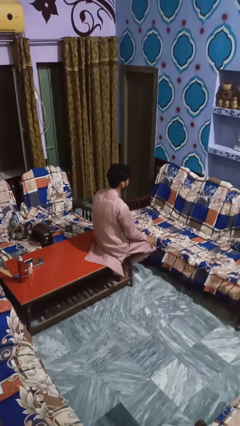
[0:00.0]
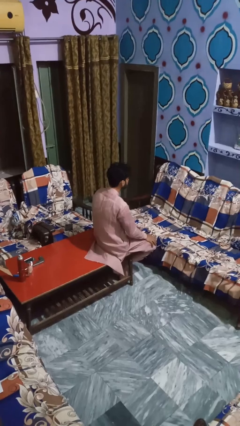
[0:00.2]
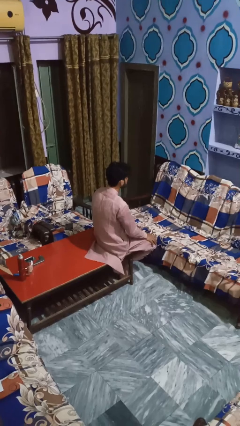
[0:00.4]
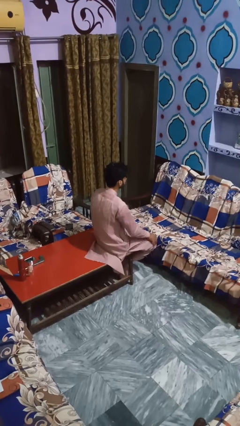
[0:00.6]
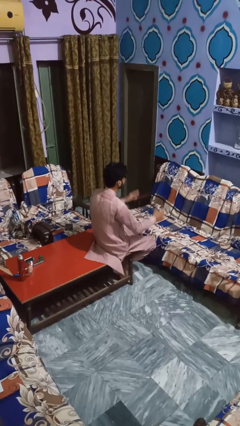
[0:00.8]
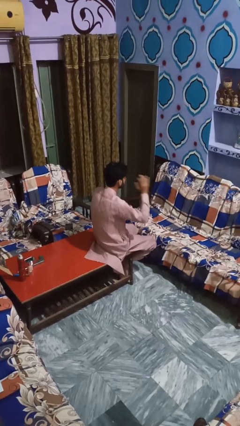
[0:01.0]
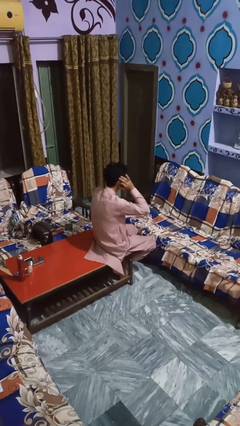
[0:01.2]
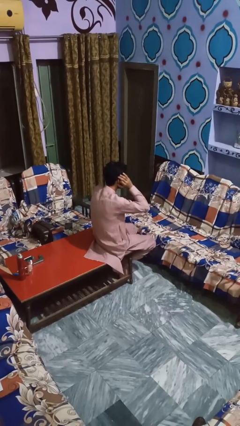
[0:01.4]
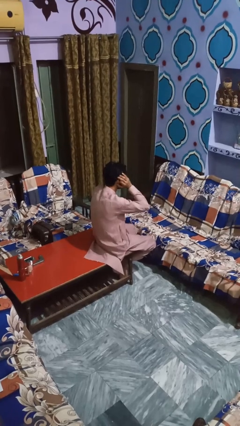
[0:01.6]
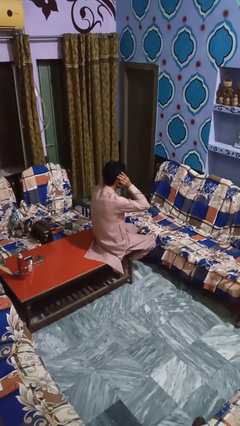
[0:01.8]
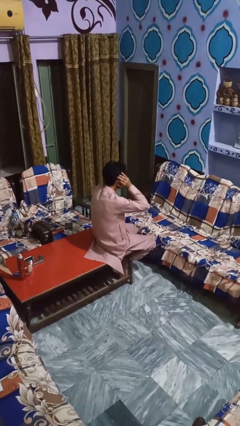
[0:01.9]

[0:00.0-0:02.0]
person puts fingers in ear

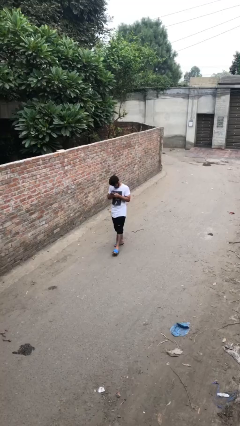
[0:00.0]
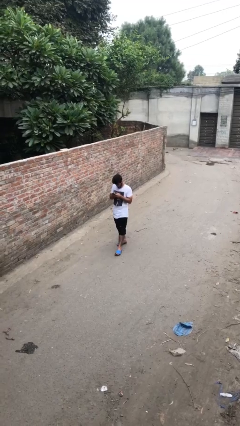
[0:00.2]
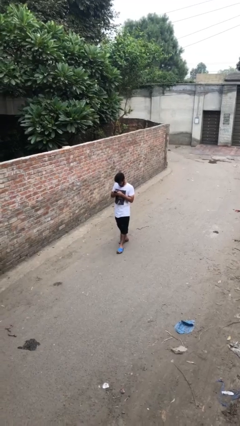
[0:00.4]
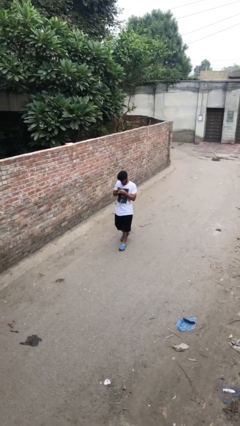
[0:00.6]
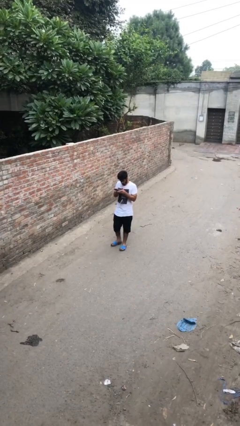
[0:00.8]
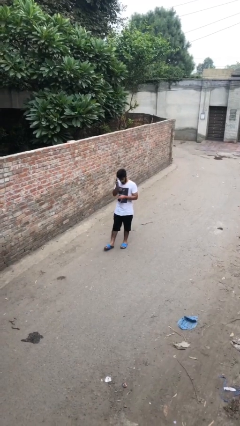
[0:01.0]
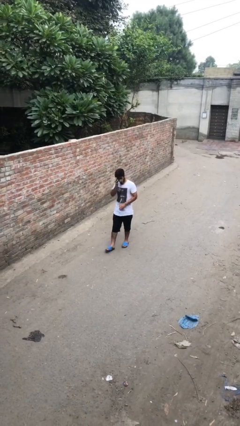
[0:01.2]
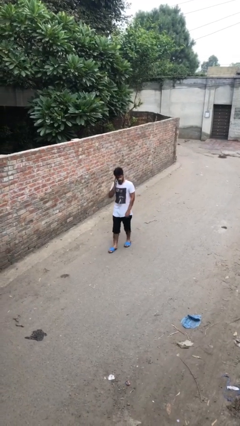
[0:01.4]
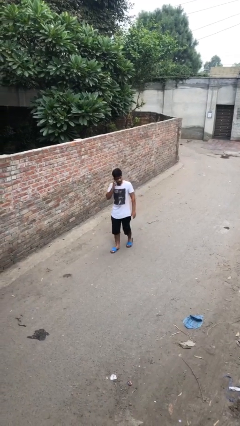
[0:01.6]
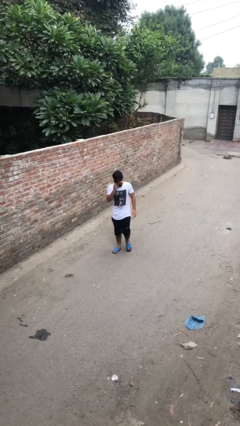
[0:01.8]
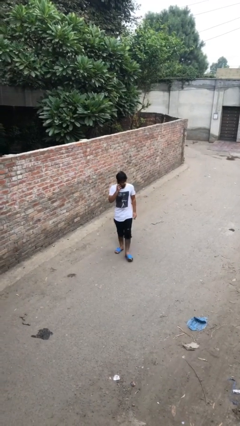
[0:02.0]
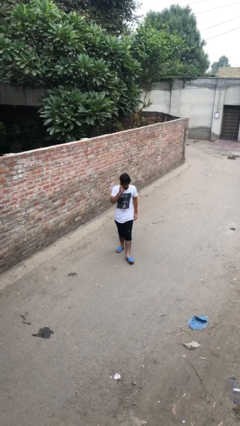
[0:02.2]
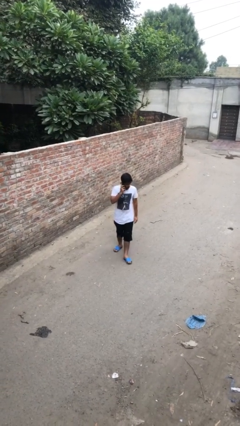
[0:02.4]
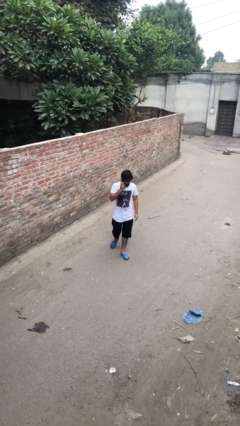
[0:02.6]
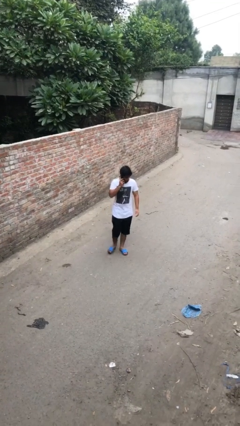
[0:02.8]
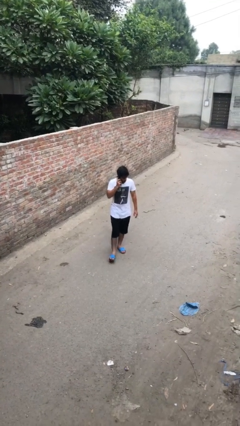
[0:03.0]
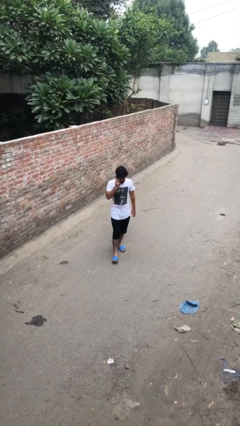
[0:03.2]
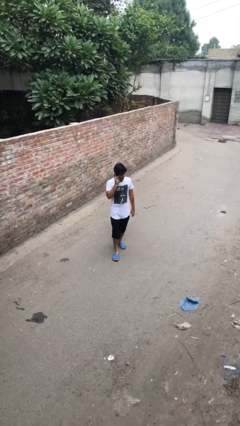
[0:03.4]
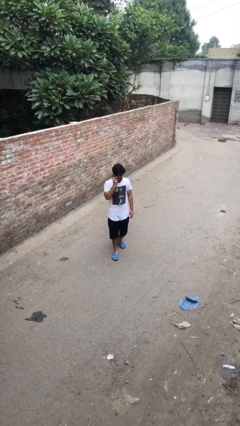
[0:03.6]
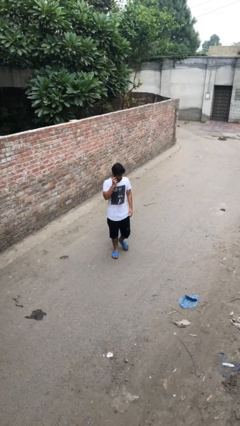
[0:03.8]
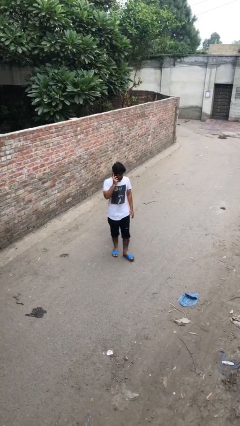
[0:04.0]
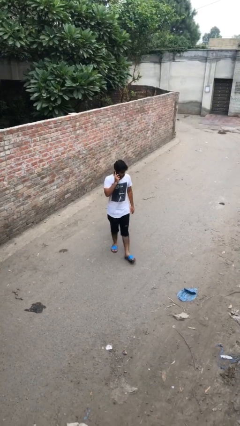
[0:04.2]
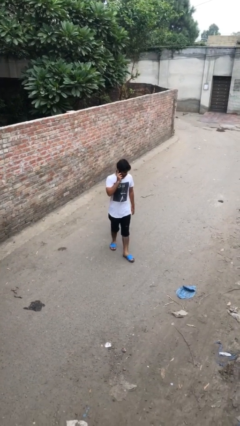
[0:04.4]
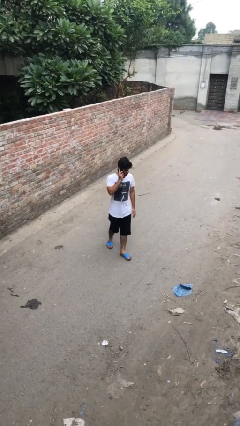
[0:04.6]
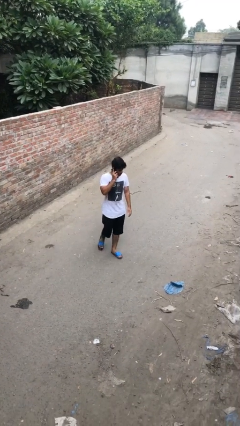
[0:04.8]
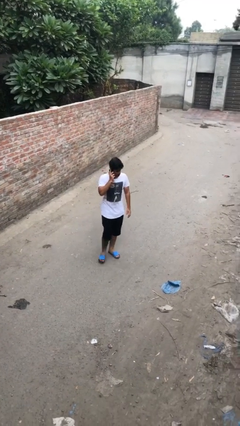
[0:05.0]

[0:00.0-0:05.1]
person talks on phone

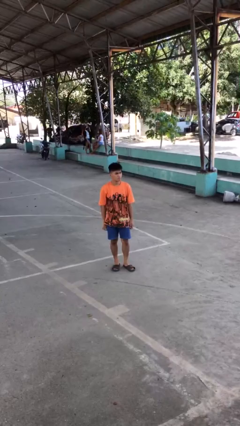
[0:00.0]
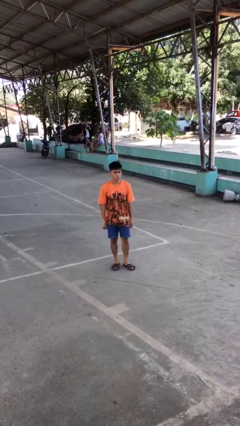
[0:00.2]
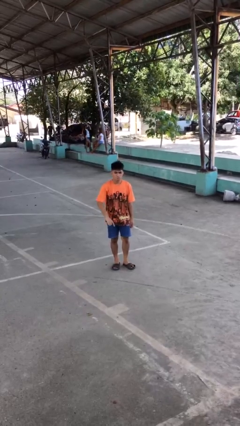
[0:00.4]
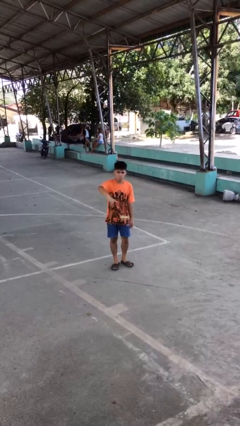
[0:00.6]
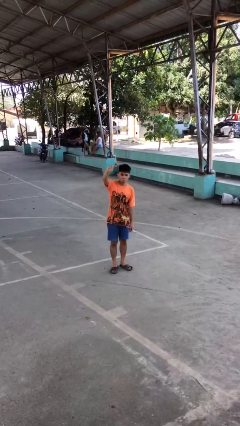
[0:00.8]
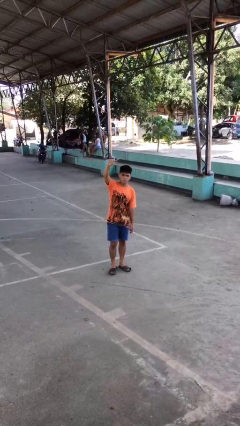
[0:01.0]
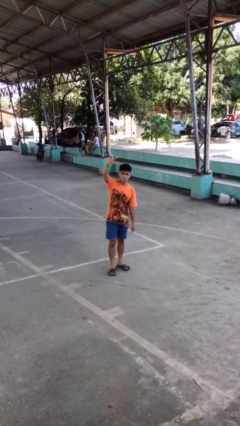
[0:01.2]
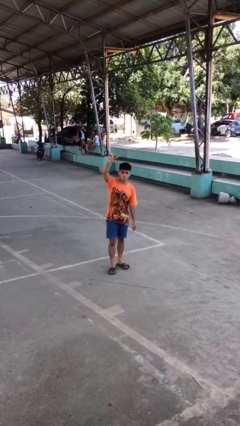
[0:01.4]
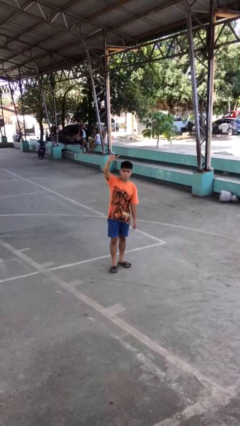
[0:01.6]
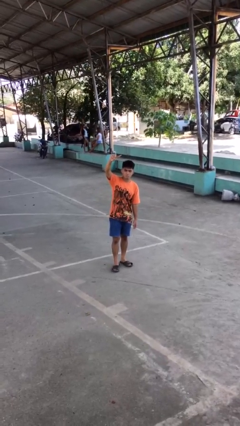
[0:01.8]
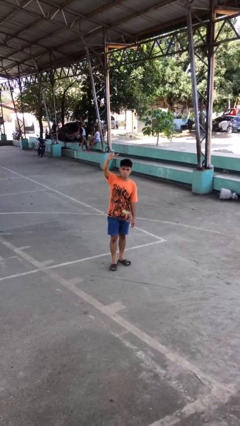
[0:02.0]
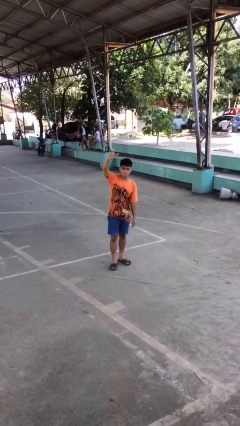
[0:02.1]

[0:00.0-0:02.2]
person gestures swipe up

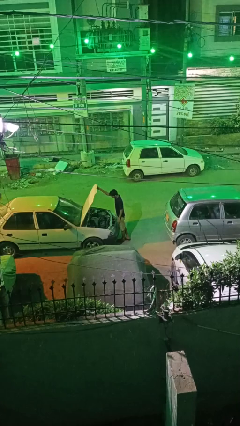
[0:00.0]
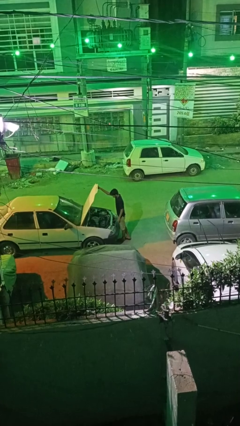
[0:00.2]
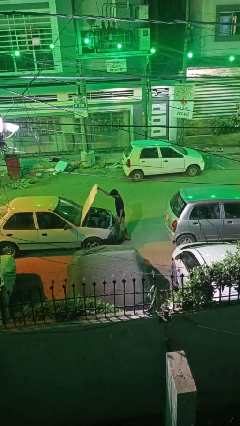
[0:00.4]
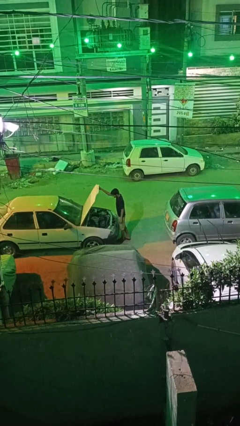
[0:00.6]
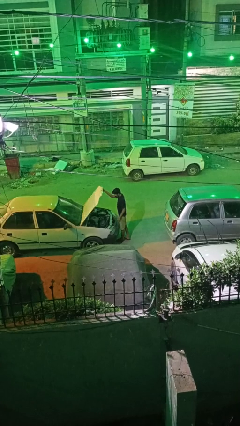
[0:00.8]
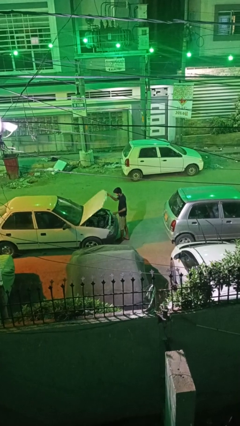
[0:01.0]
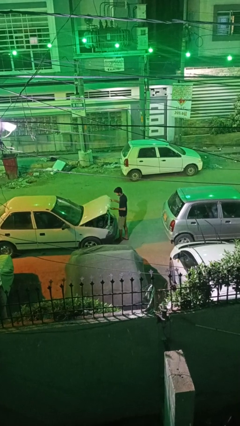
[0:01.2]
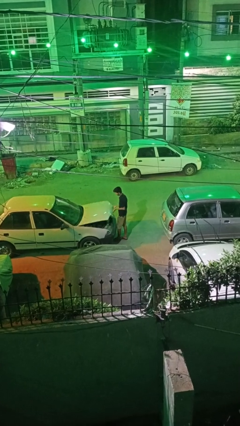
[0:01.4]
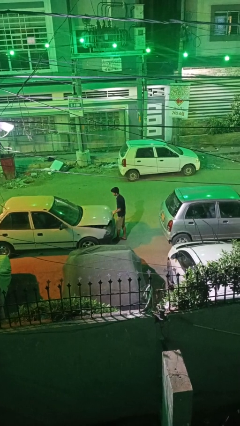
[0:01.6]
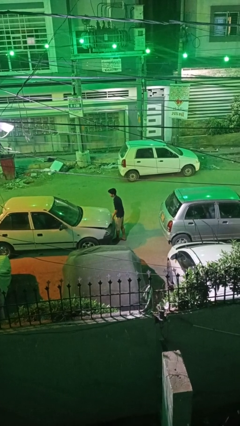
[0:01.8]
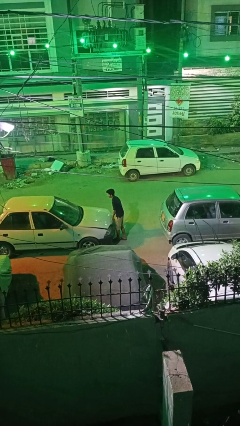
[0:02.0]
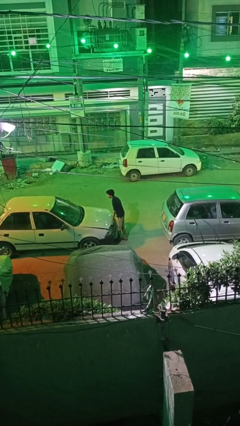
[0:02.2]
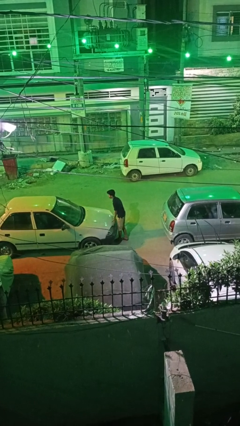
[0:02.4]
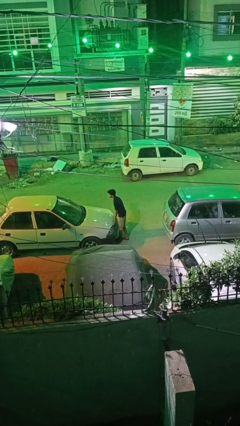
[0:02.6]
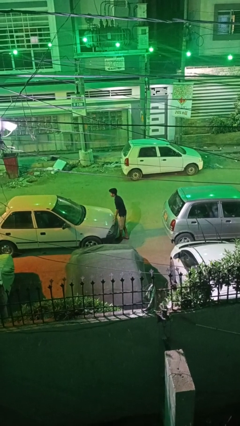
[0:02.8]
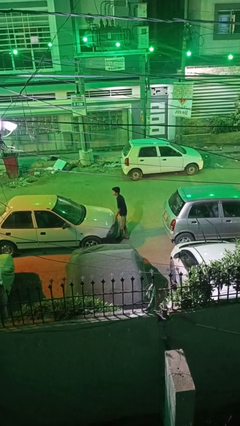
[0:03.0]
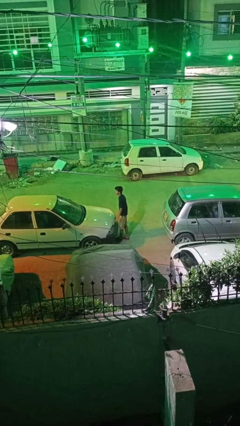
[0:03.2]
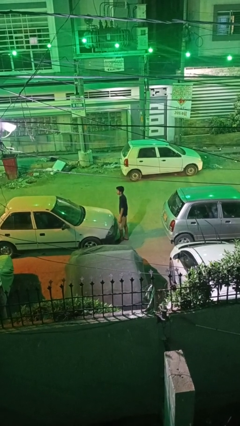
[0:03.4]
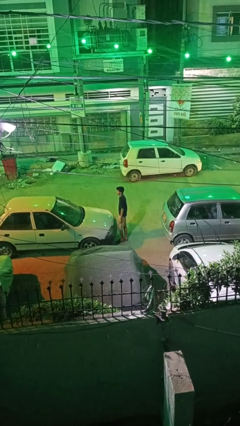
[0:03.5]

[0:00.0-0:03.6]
person closes car hood

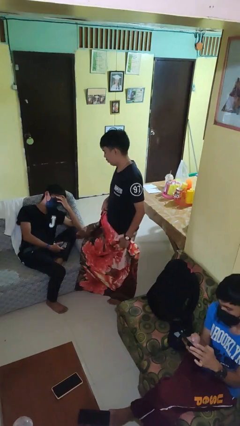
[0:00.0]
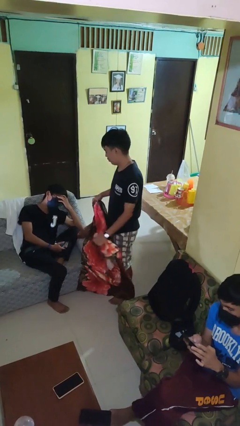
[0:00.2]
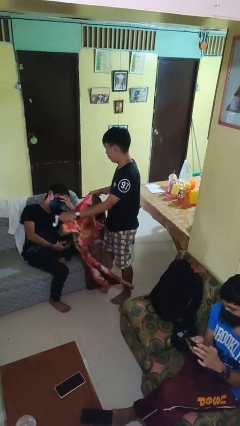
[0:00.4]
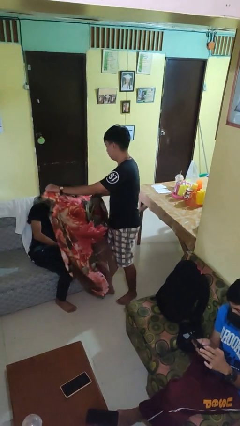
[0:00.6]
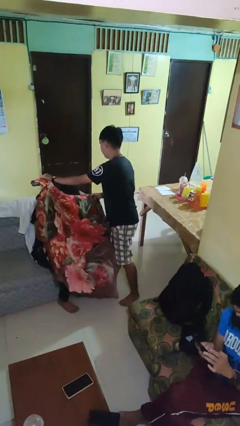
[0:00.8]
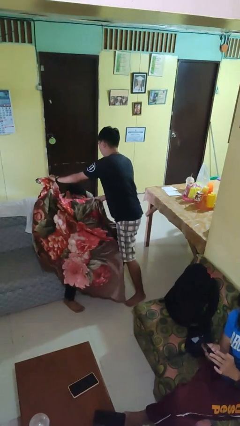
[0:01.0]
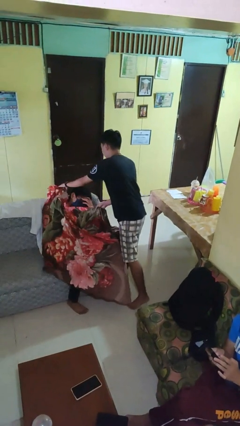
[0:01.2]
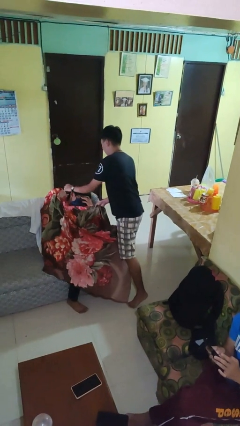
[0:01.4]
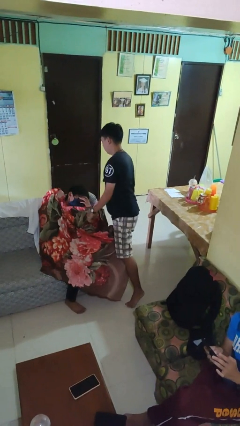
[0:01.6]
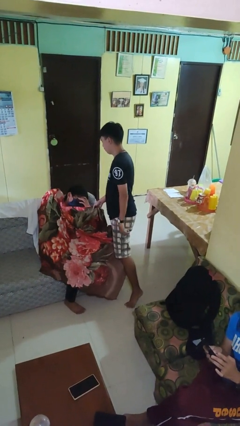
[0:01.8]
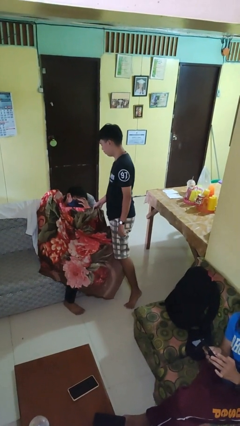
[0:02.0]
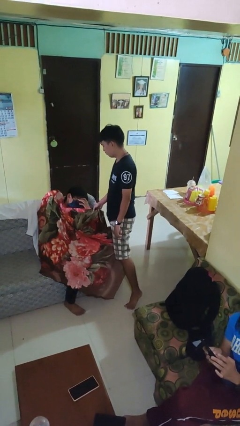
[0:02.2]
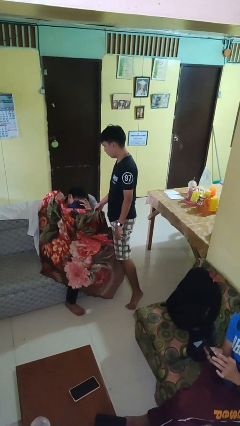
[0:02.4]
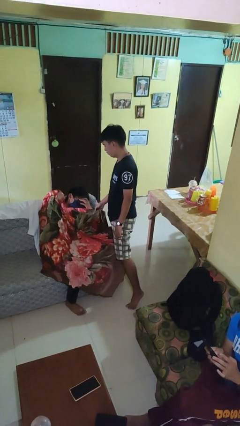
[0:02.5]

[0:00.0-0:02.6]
person covers friend with blanket

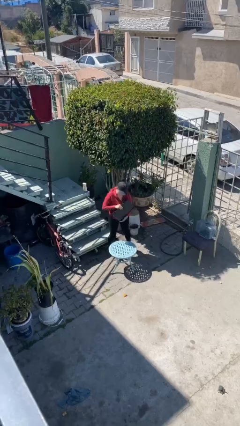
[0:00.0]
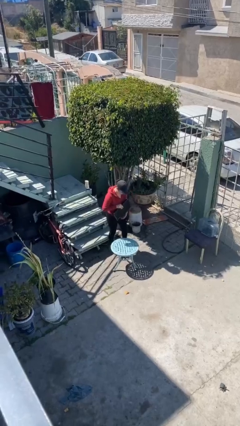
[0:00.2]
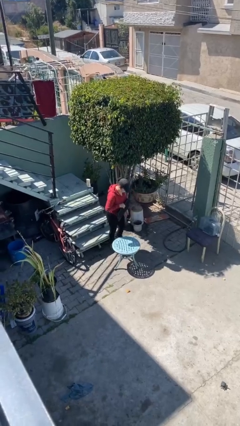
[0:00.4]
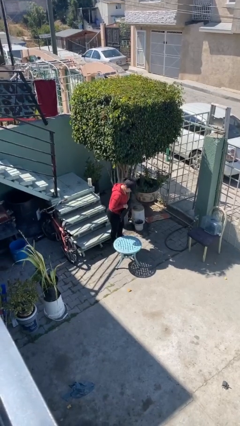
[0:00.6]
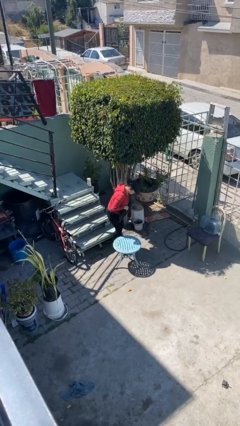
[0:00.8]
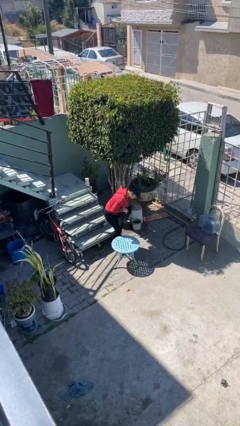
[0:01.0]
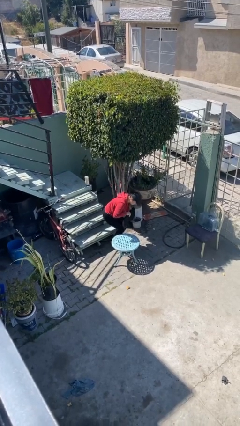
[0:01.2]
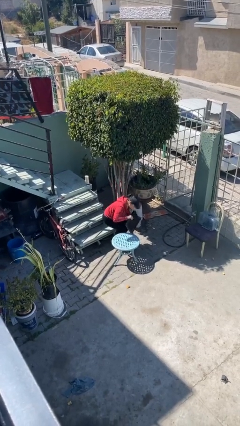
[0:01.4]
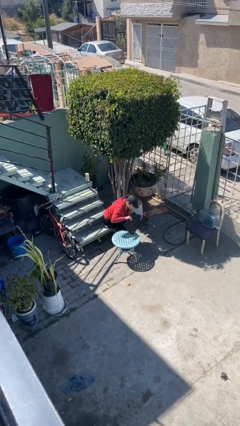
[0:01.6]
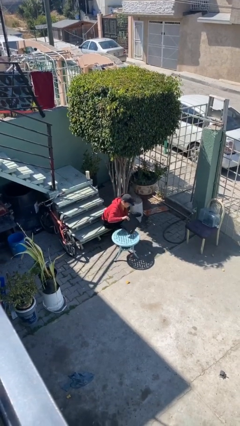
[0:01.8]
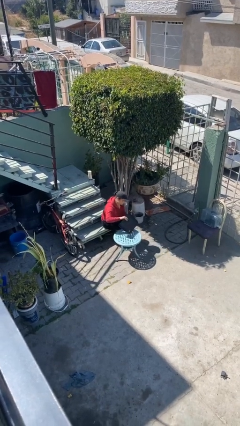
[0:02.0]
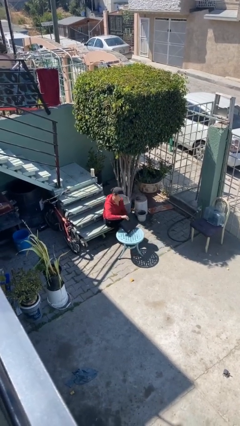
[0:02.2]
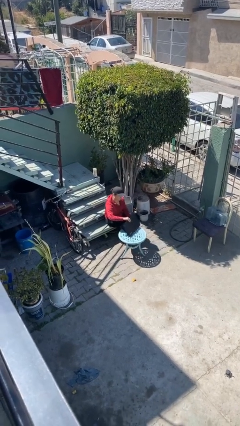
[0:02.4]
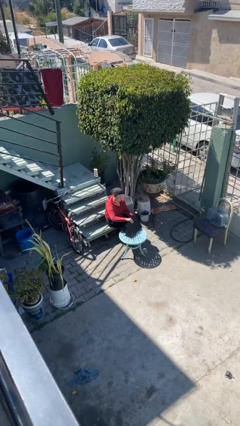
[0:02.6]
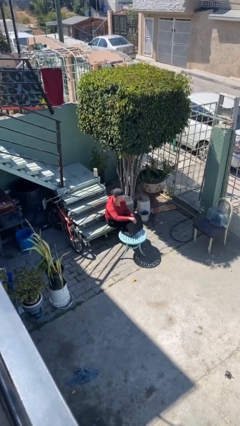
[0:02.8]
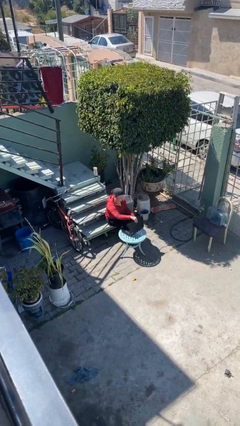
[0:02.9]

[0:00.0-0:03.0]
person sits down
